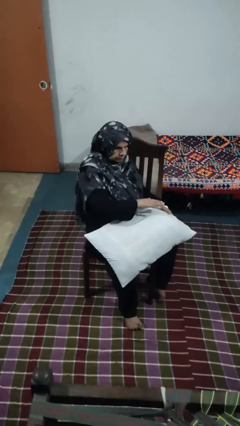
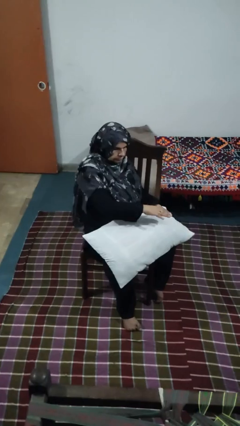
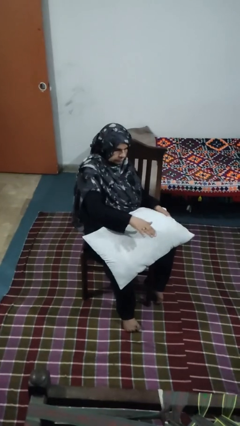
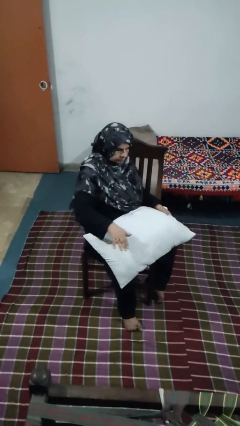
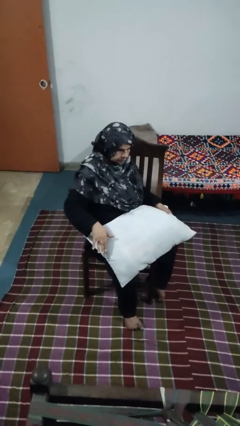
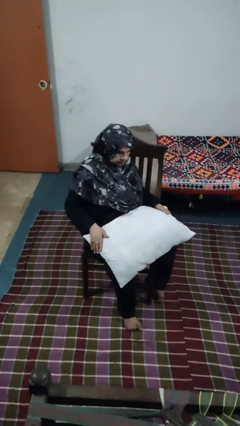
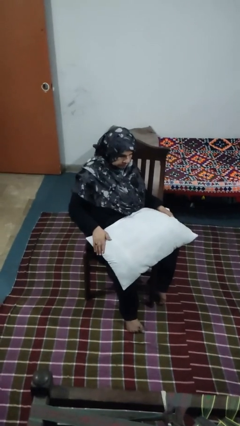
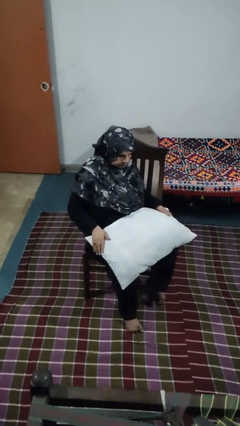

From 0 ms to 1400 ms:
person waves hand over object

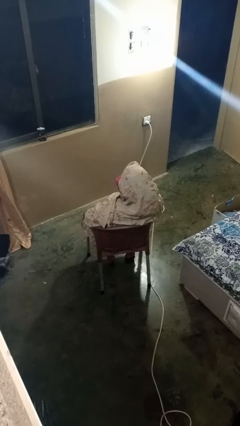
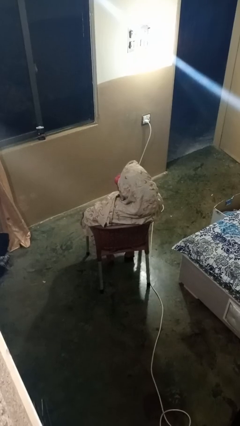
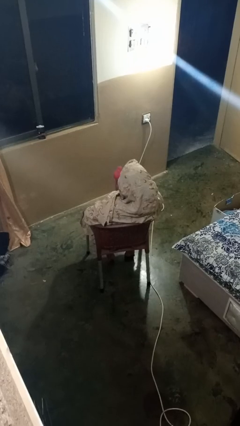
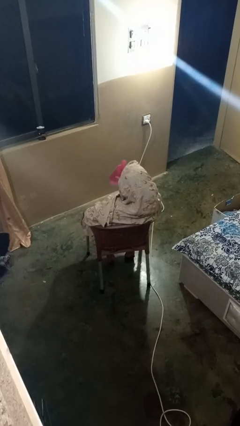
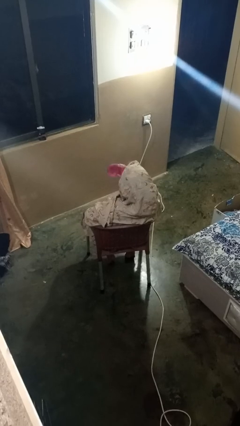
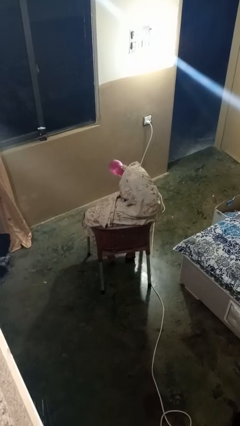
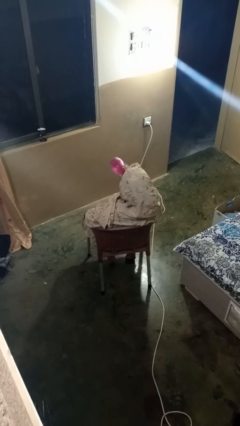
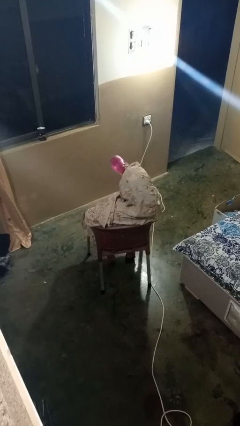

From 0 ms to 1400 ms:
person drinks from bottle

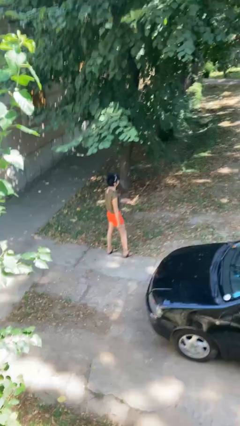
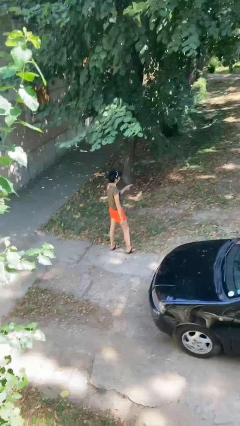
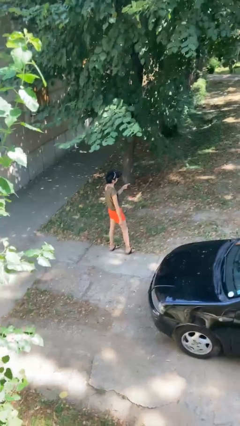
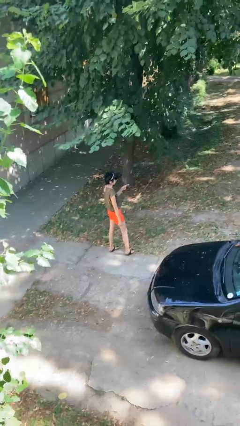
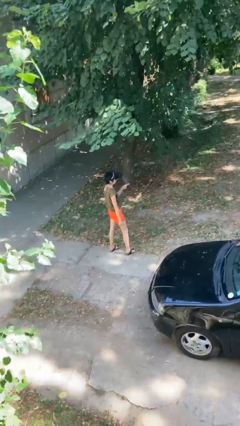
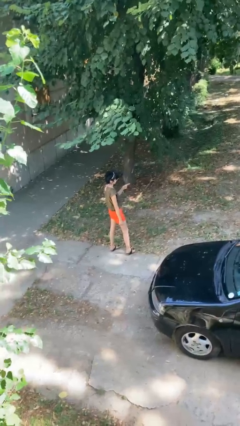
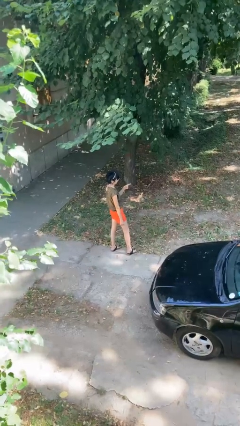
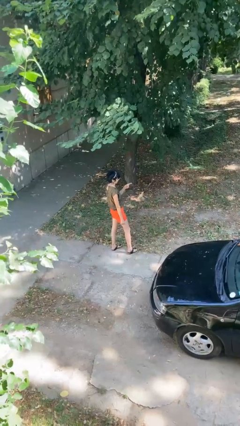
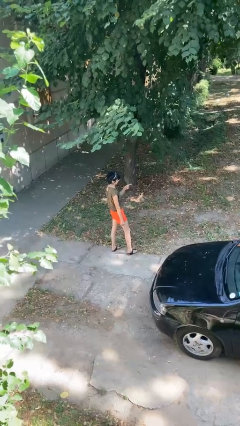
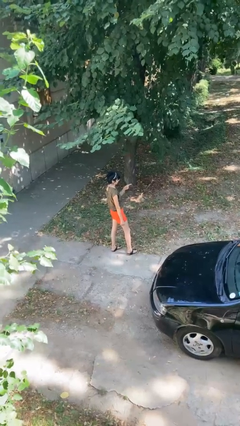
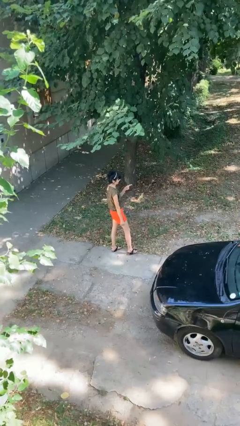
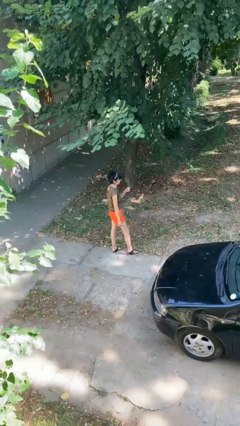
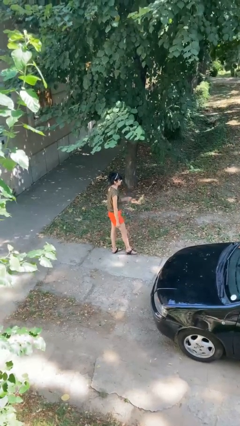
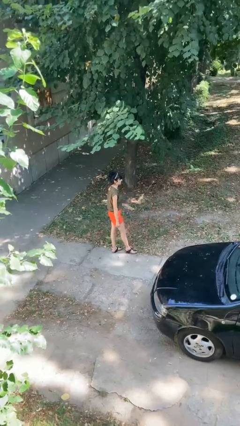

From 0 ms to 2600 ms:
person points at person

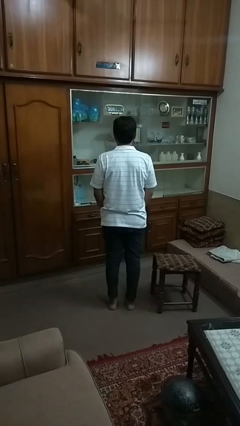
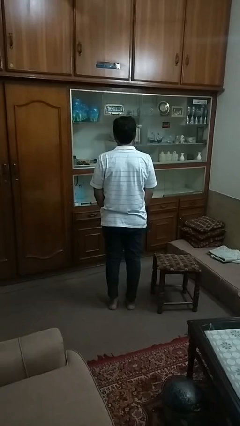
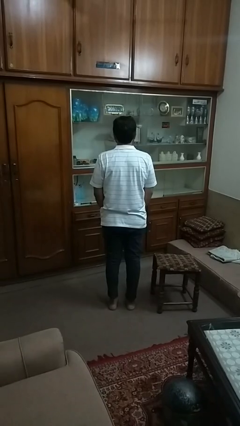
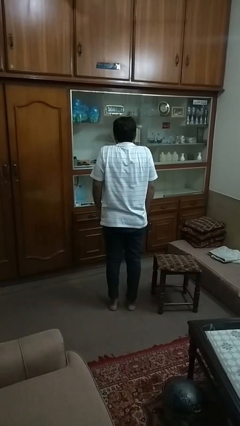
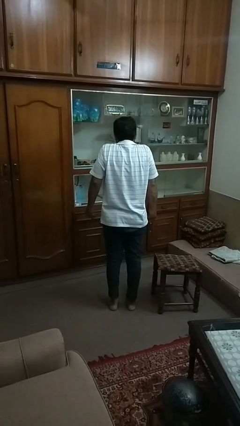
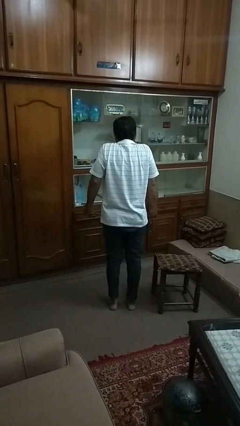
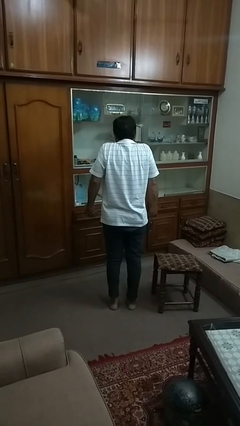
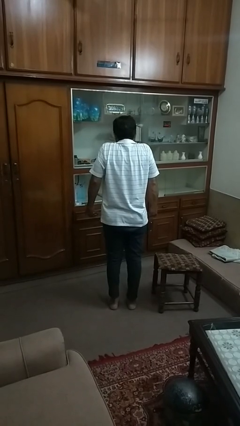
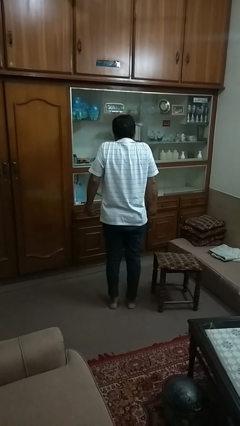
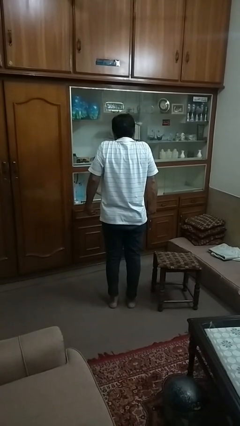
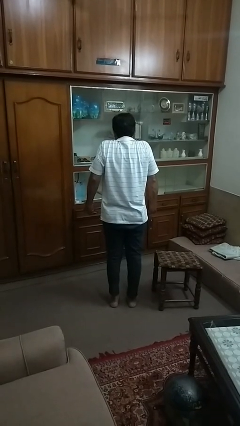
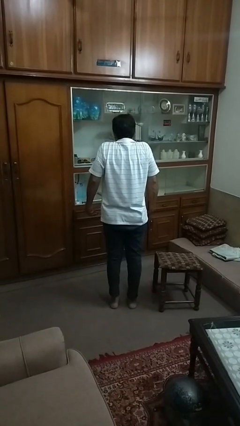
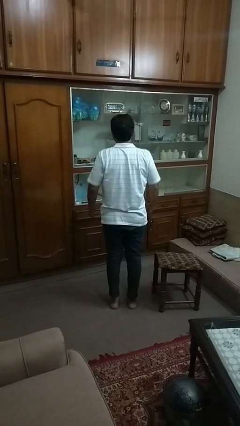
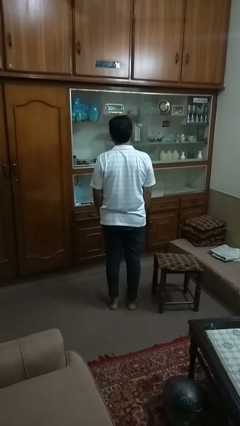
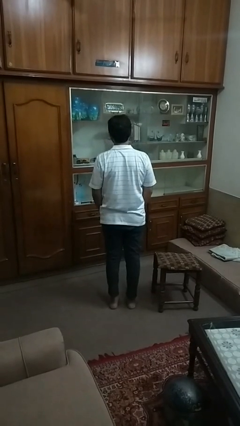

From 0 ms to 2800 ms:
person shrugs

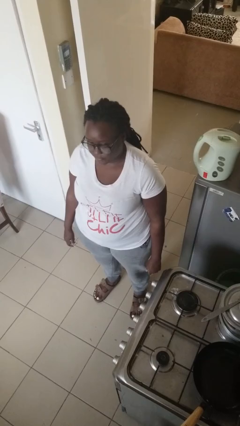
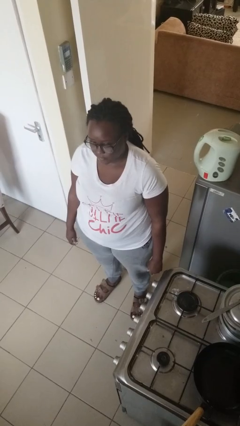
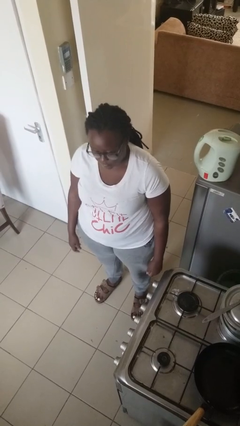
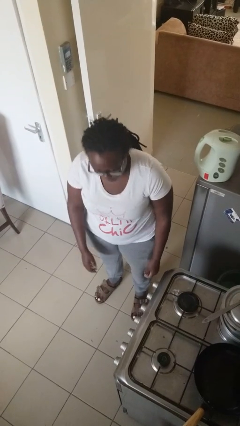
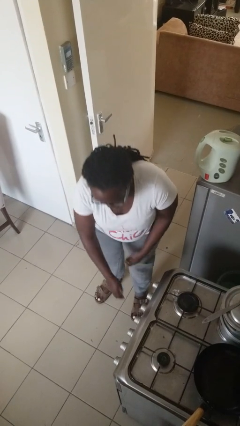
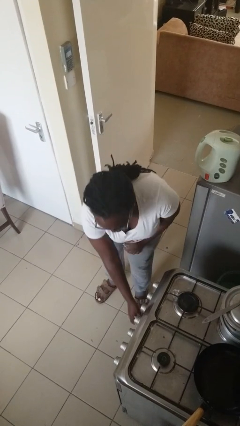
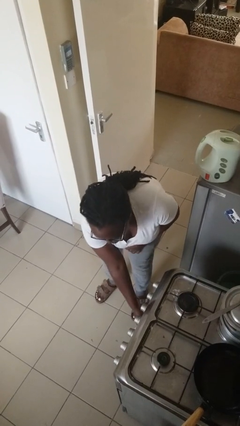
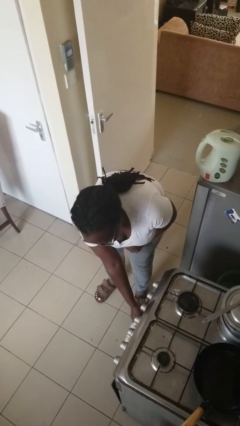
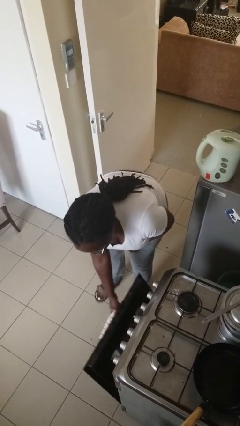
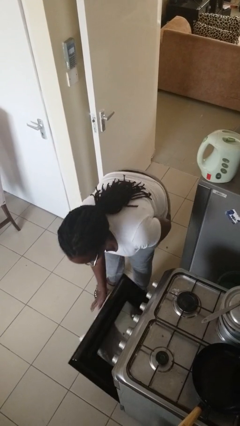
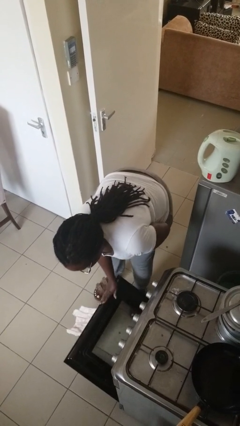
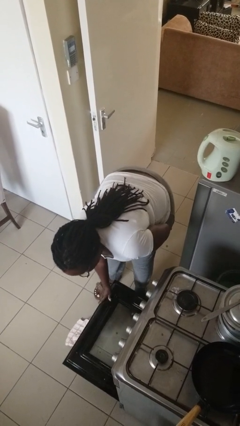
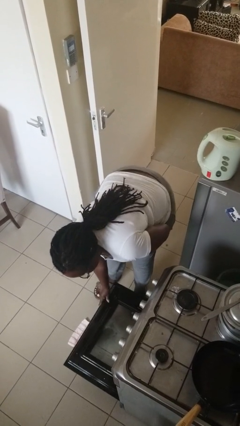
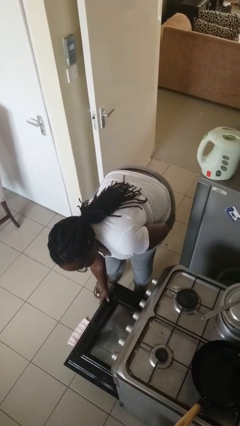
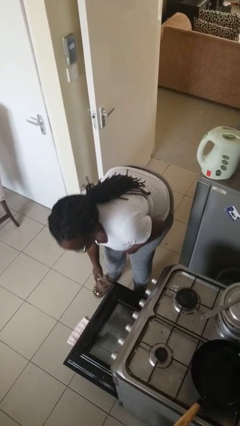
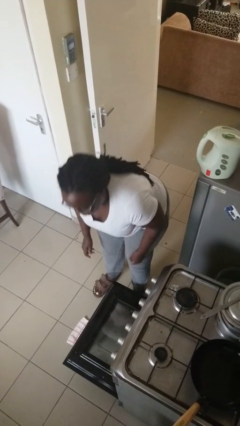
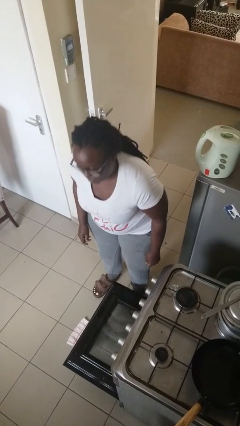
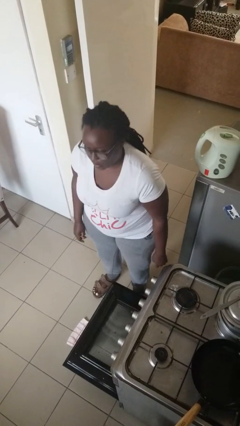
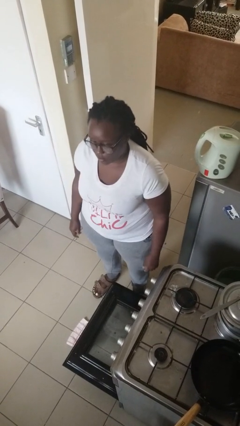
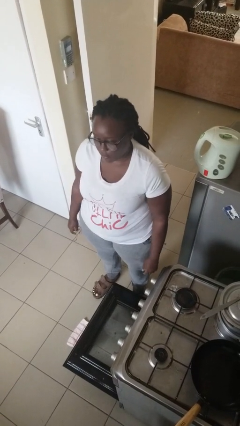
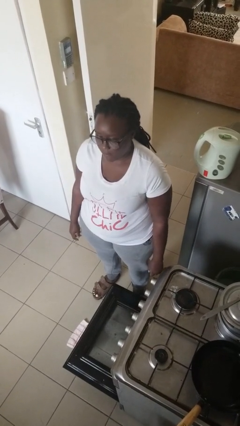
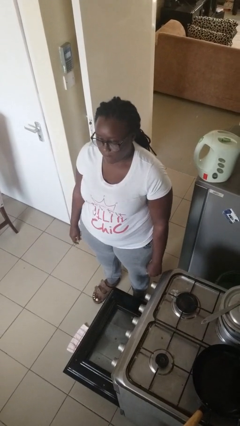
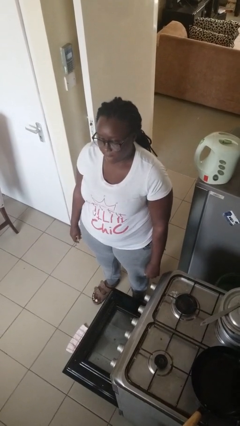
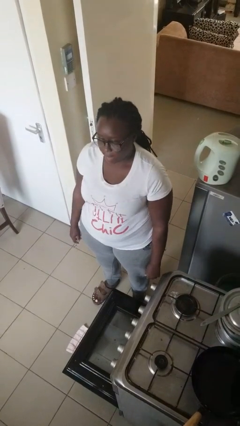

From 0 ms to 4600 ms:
person opens oven door

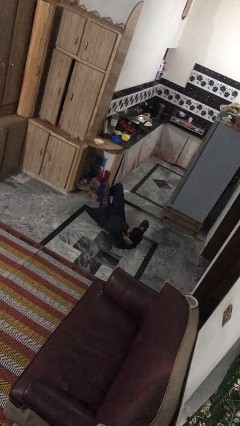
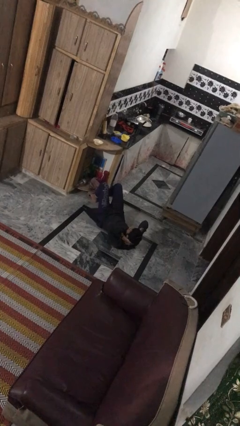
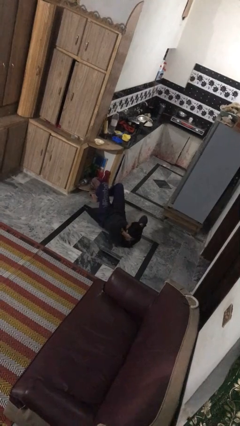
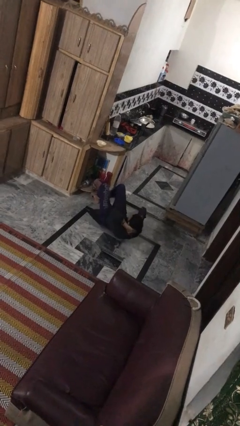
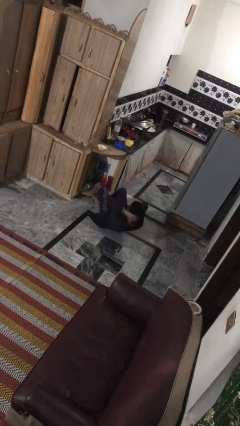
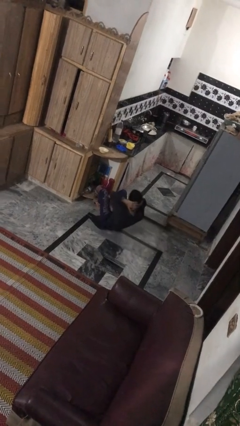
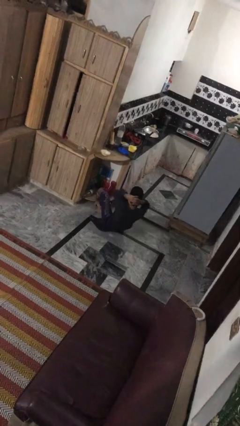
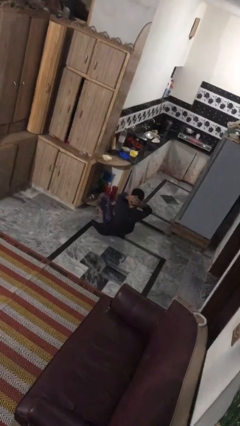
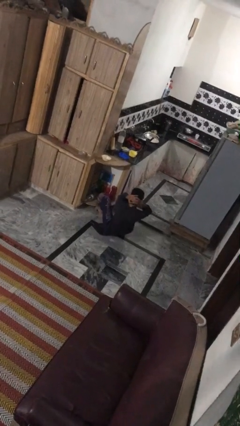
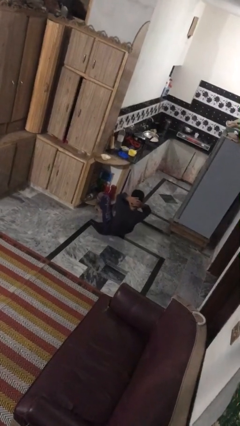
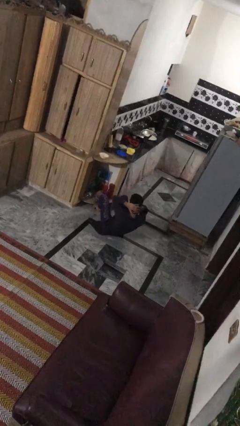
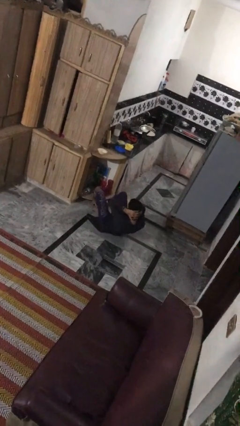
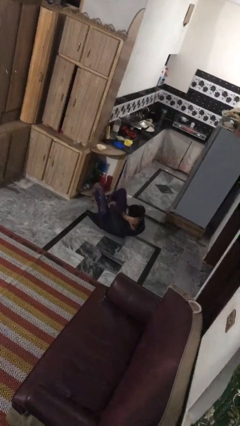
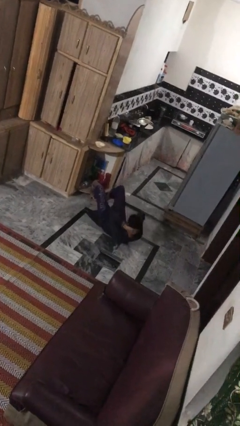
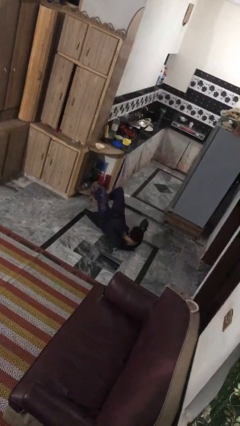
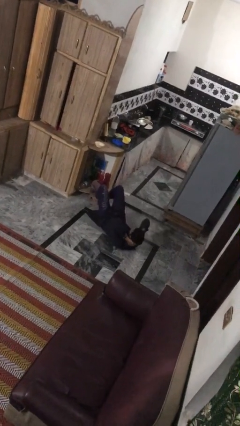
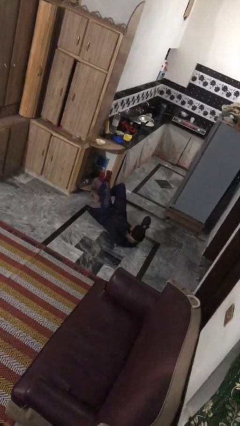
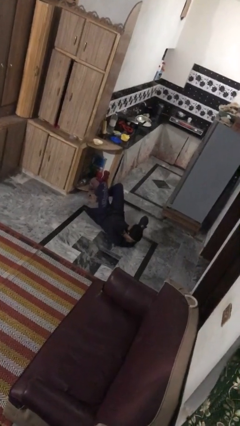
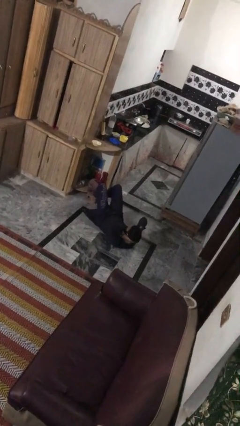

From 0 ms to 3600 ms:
person exercises with situp

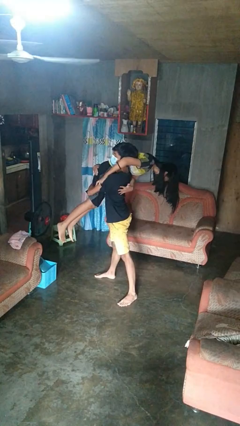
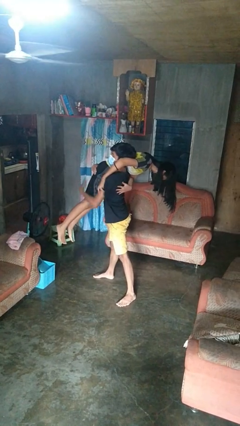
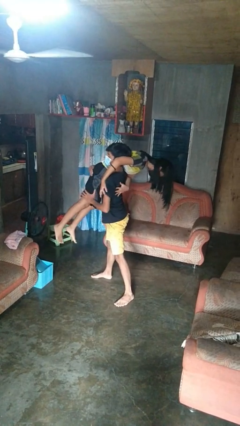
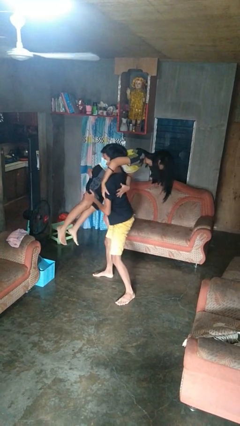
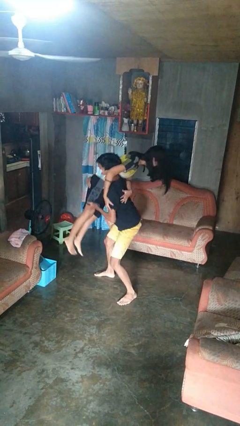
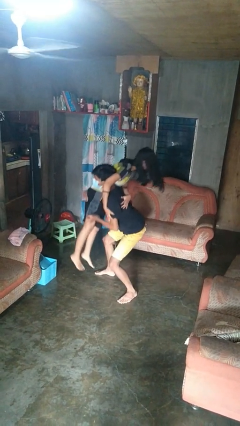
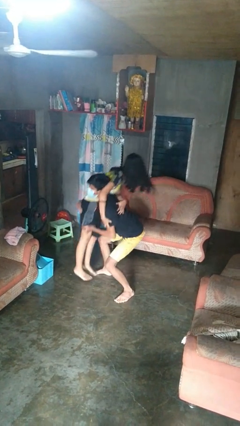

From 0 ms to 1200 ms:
person puts down person
